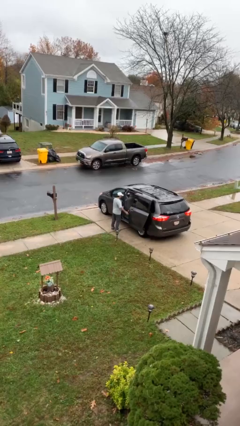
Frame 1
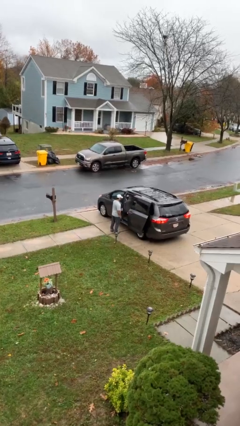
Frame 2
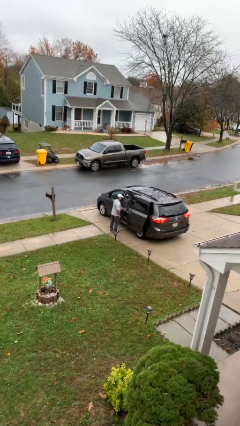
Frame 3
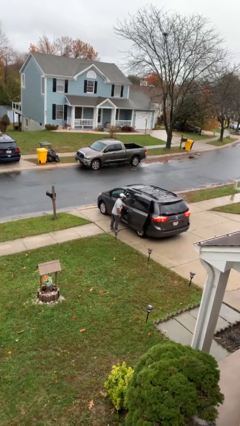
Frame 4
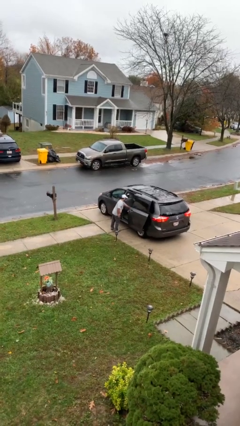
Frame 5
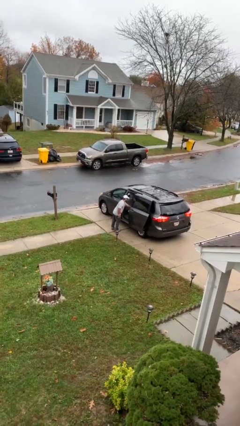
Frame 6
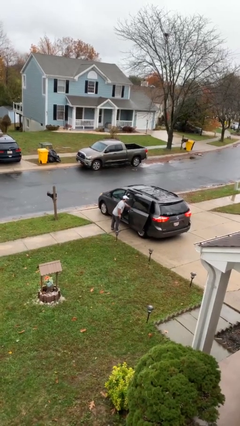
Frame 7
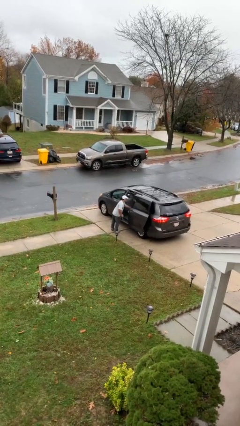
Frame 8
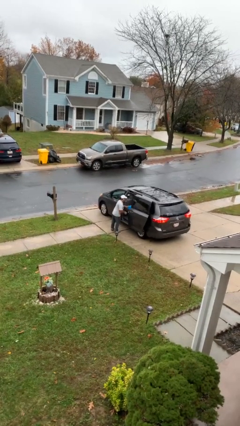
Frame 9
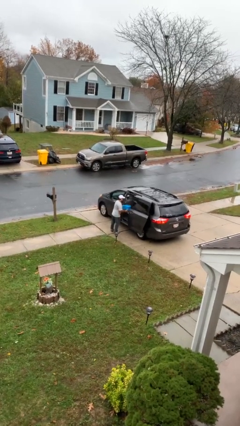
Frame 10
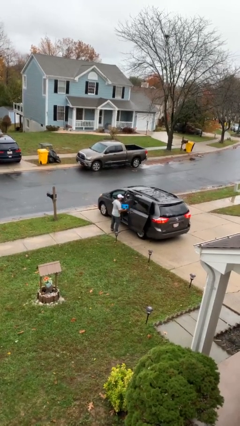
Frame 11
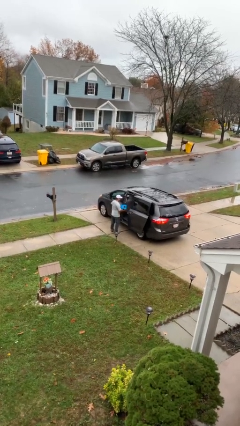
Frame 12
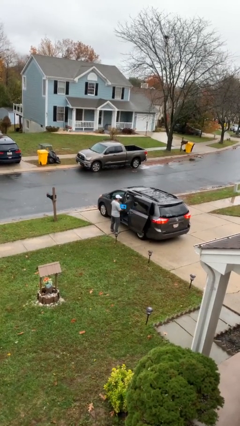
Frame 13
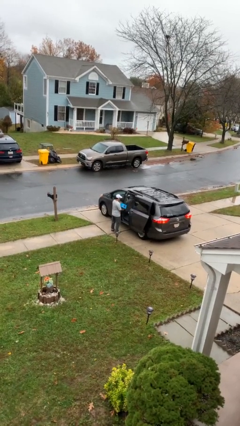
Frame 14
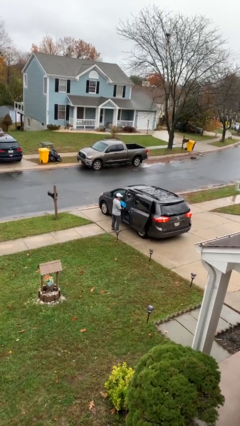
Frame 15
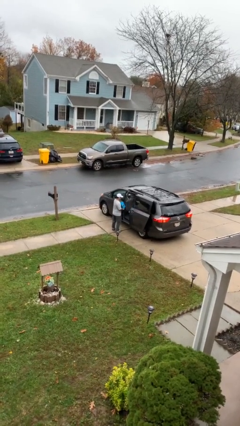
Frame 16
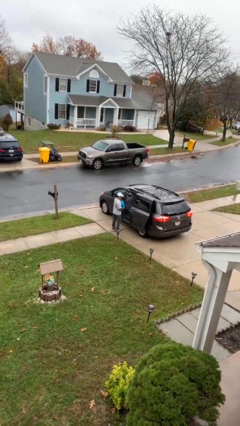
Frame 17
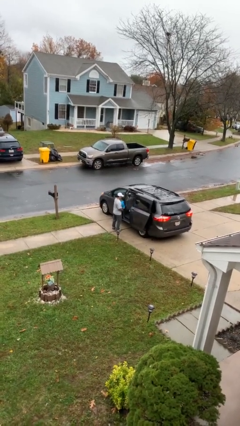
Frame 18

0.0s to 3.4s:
person unloads car

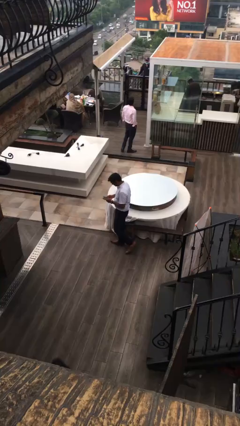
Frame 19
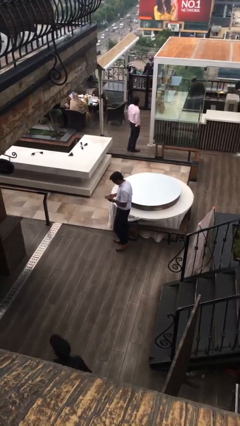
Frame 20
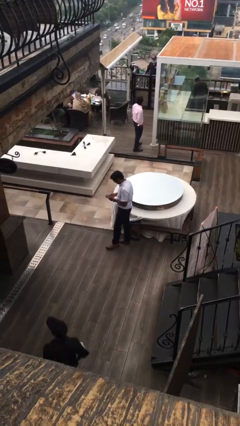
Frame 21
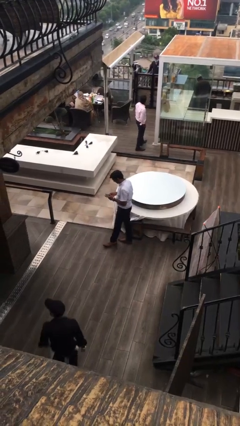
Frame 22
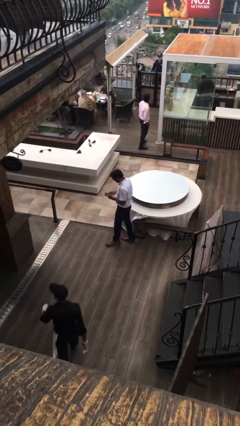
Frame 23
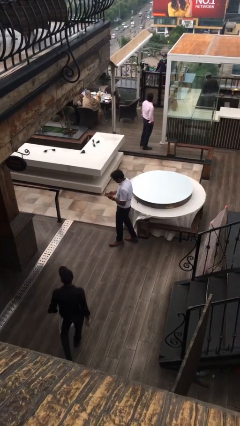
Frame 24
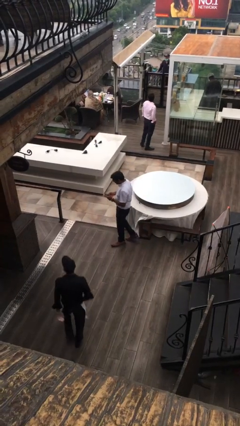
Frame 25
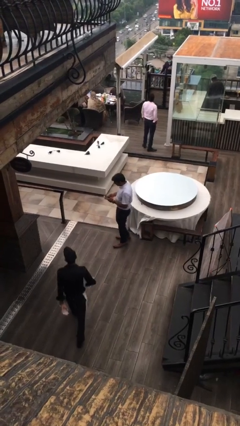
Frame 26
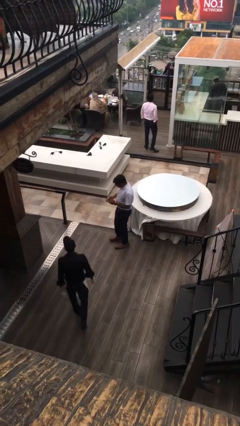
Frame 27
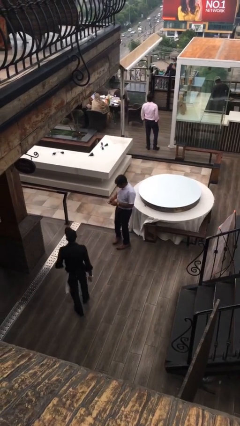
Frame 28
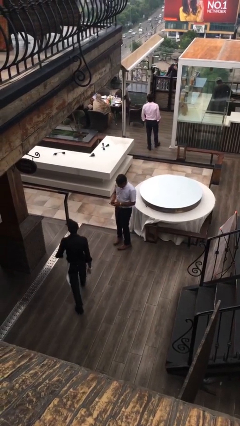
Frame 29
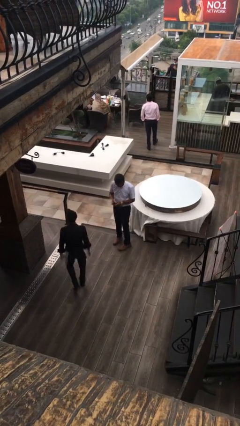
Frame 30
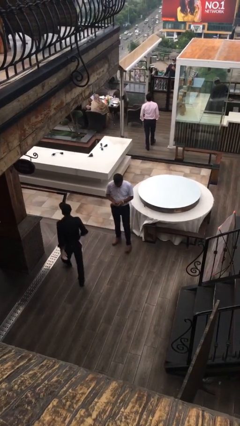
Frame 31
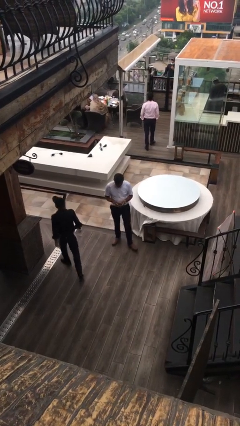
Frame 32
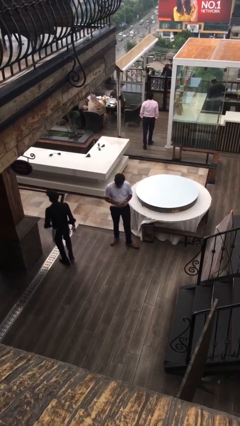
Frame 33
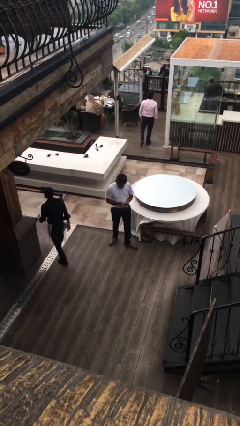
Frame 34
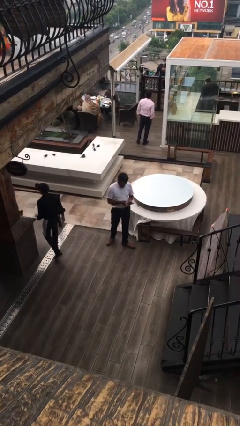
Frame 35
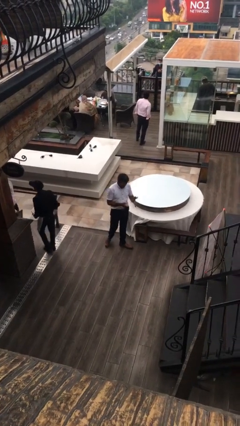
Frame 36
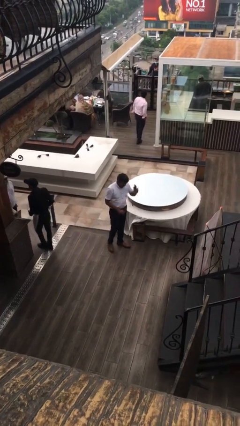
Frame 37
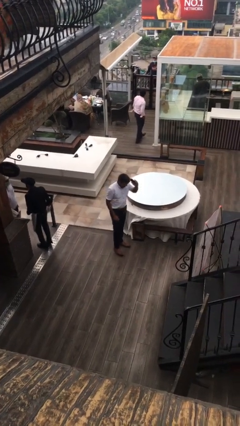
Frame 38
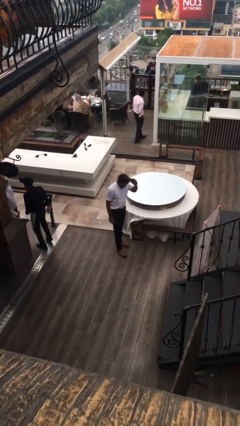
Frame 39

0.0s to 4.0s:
person texts on phone

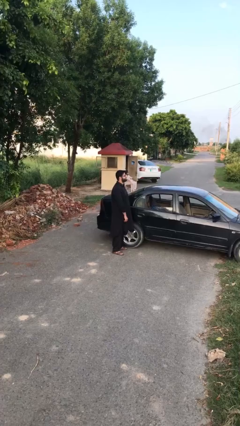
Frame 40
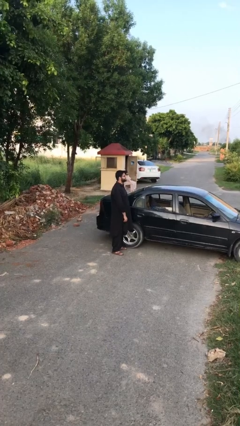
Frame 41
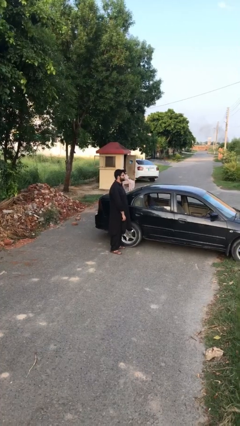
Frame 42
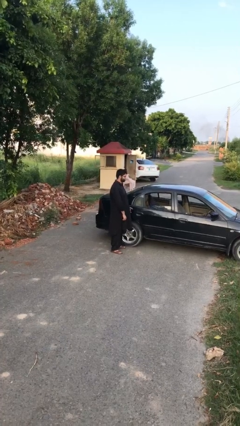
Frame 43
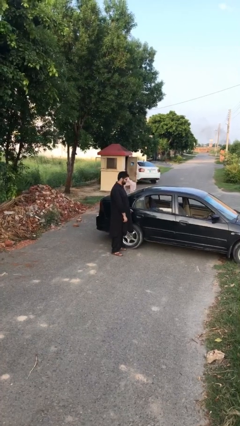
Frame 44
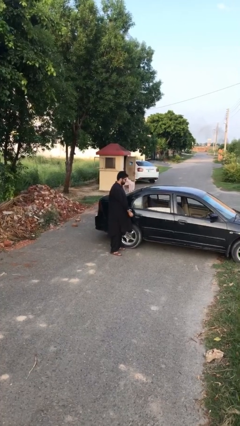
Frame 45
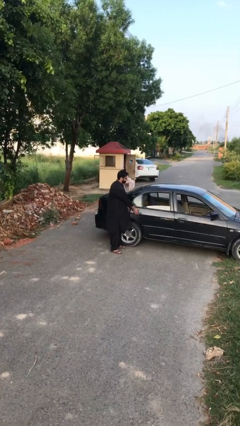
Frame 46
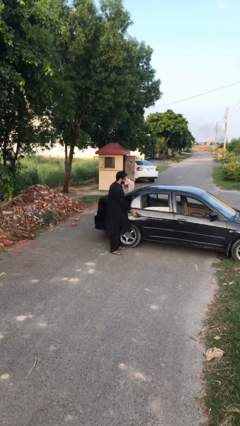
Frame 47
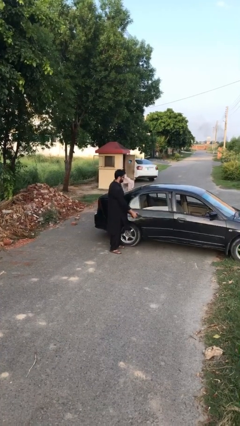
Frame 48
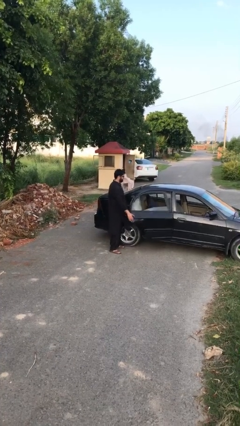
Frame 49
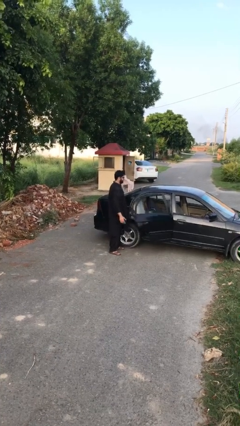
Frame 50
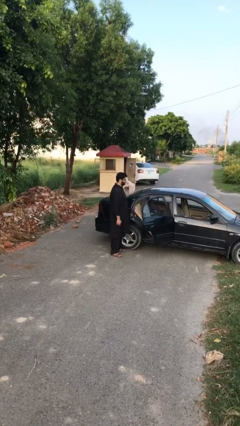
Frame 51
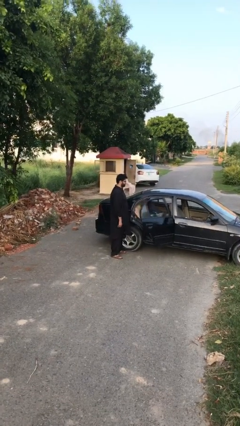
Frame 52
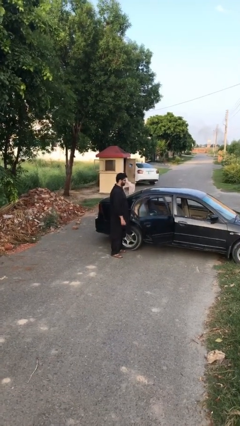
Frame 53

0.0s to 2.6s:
person opens car door

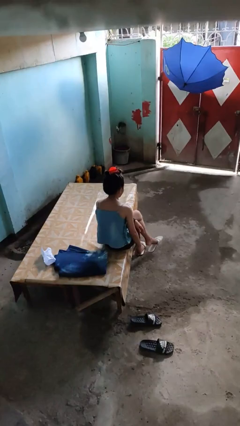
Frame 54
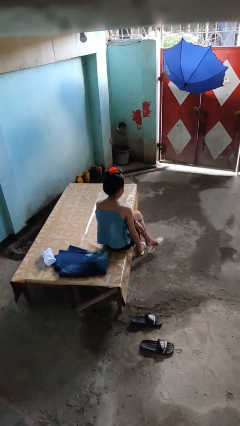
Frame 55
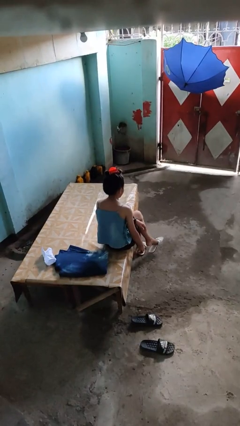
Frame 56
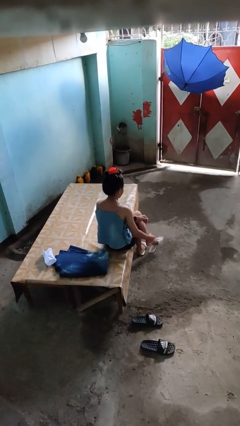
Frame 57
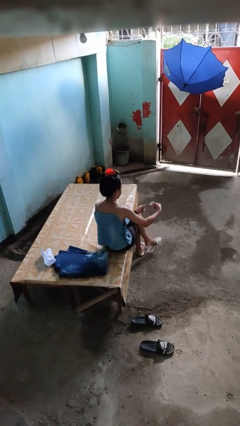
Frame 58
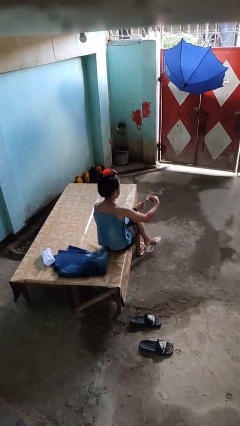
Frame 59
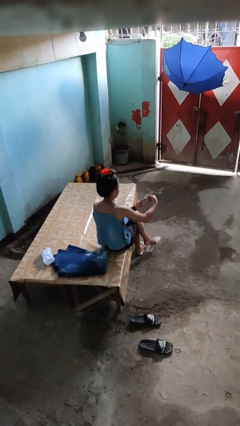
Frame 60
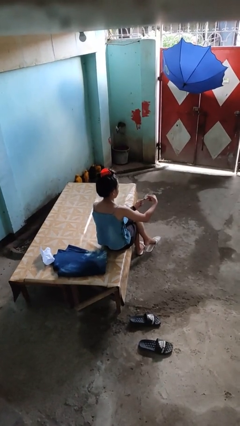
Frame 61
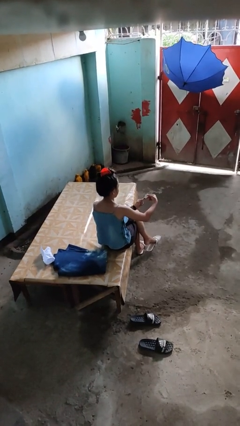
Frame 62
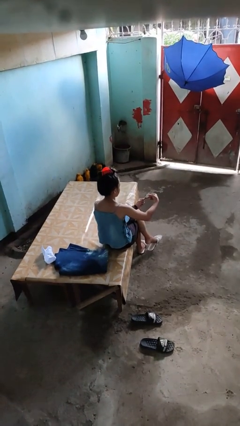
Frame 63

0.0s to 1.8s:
person clips fingernails

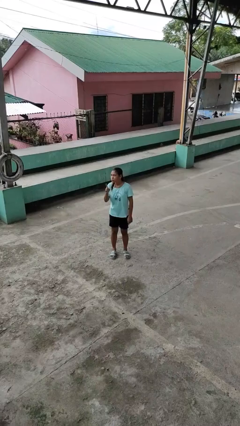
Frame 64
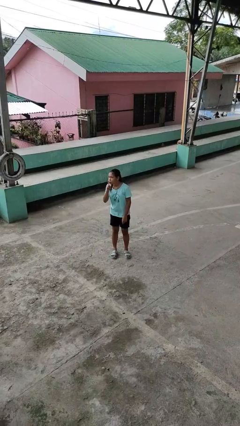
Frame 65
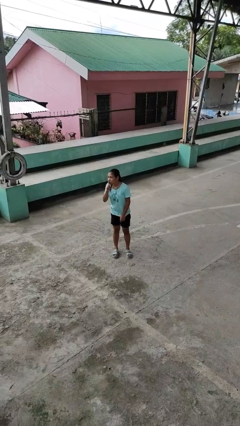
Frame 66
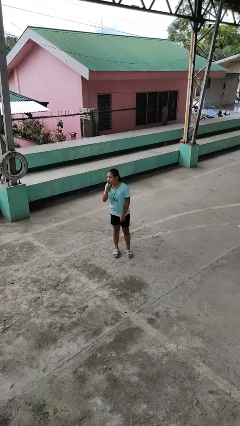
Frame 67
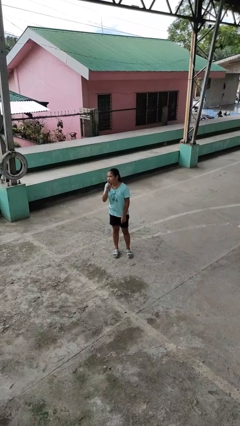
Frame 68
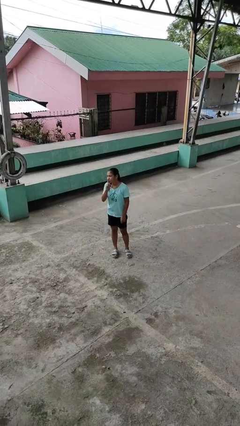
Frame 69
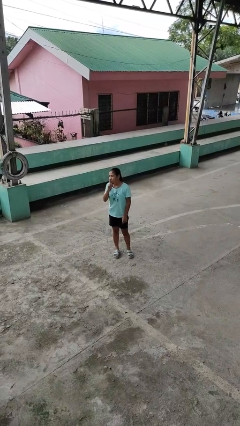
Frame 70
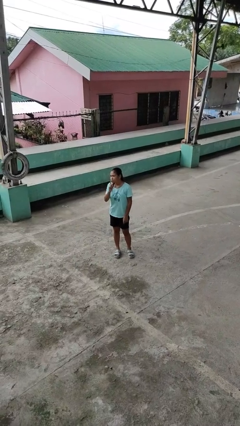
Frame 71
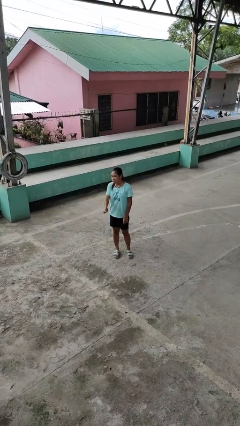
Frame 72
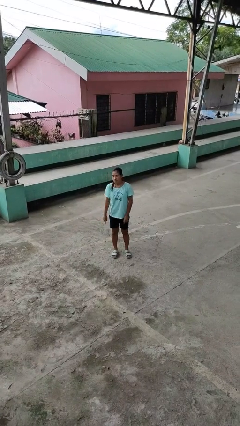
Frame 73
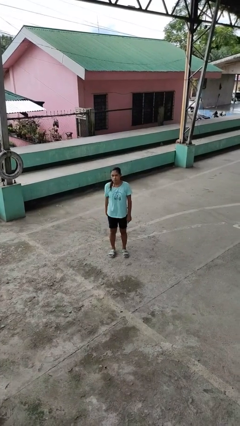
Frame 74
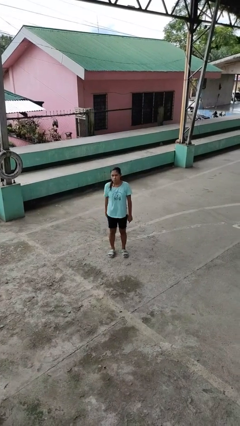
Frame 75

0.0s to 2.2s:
person gestures be quiet

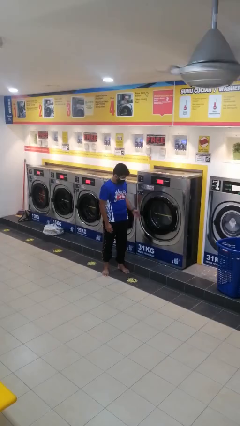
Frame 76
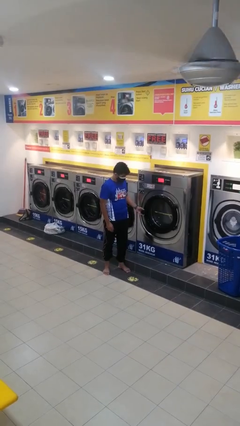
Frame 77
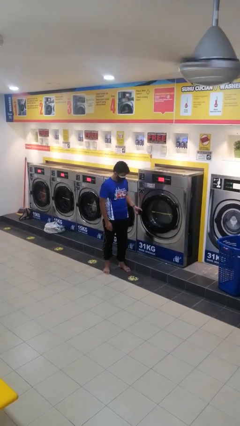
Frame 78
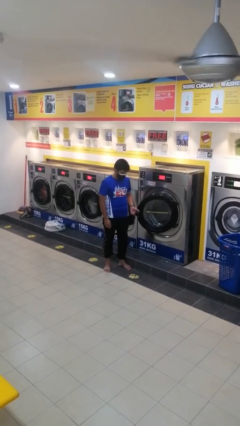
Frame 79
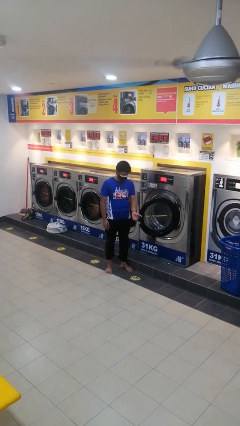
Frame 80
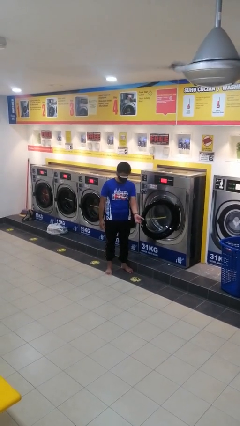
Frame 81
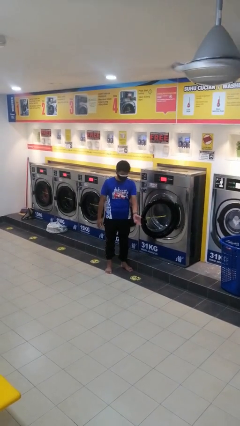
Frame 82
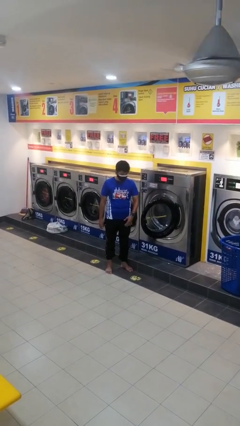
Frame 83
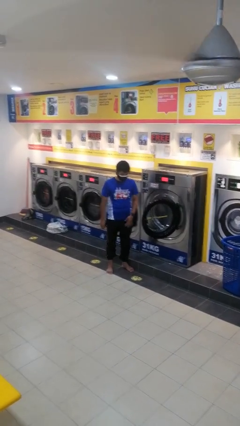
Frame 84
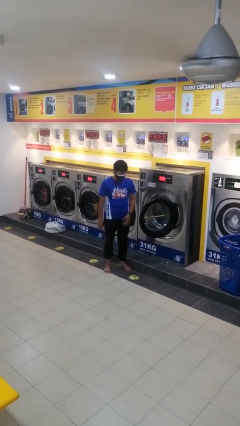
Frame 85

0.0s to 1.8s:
person opens clothes washer

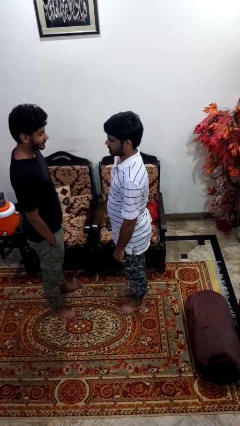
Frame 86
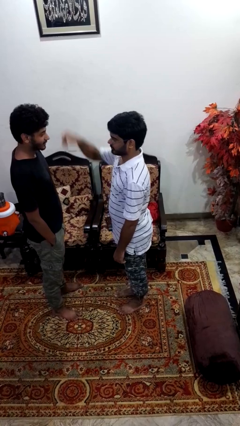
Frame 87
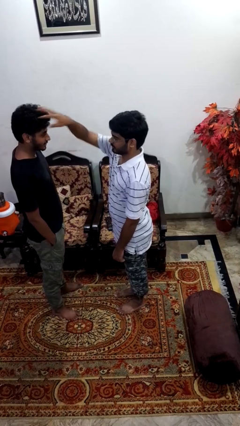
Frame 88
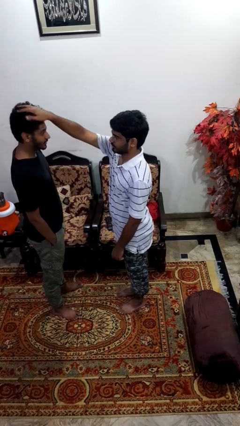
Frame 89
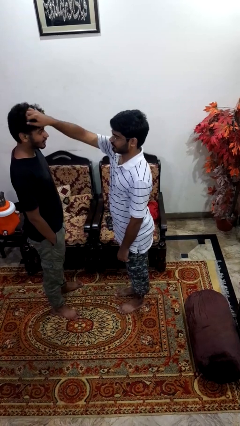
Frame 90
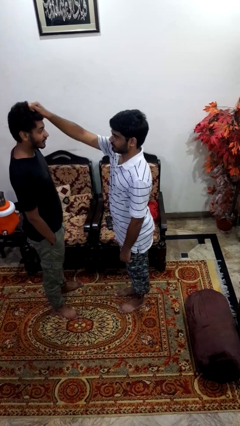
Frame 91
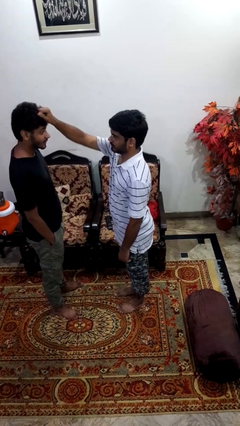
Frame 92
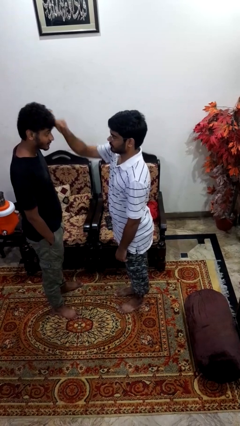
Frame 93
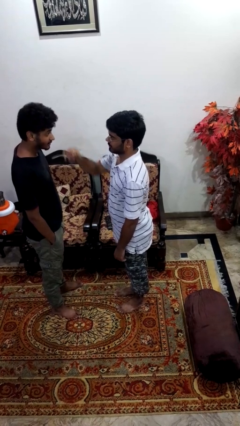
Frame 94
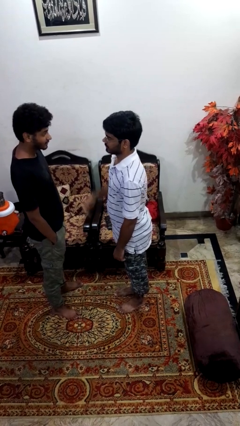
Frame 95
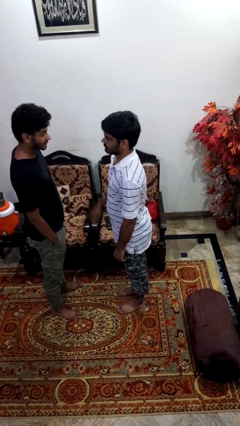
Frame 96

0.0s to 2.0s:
person grabs person by hair
